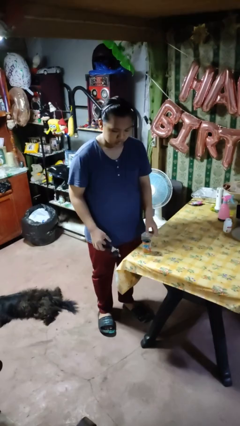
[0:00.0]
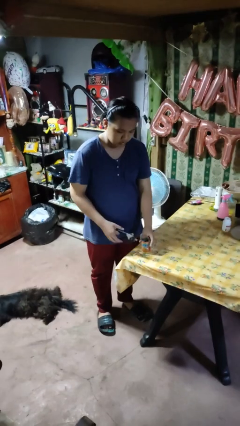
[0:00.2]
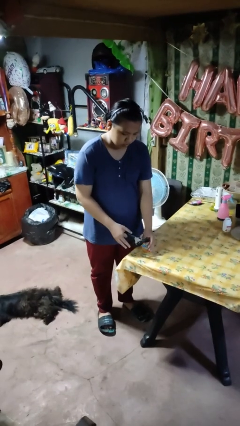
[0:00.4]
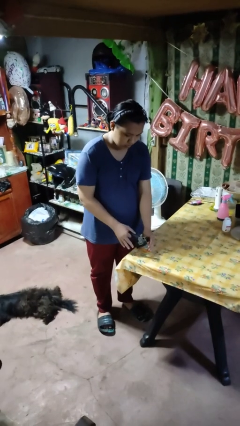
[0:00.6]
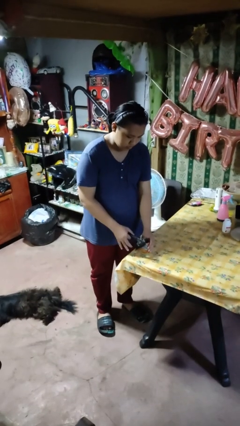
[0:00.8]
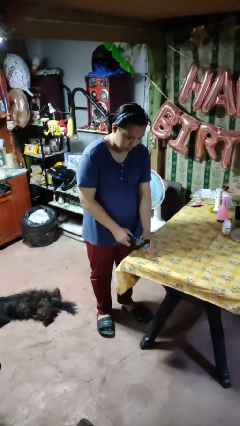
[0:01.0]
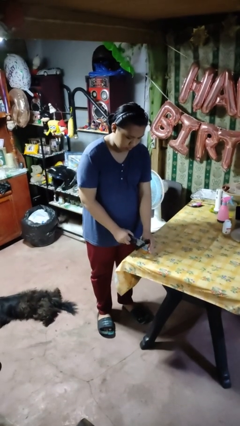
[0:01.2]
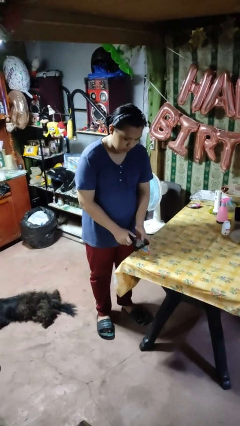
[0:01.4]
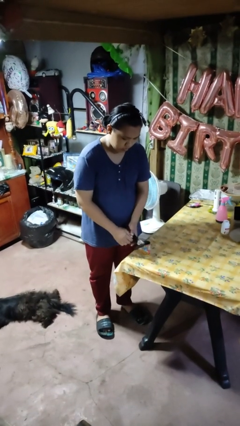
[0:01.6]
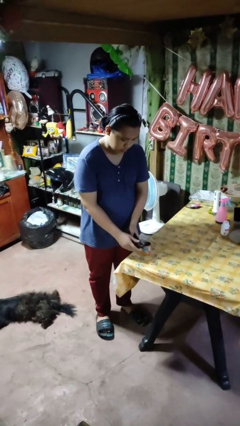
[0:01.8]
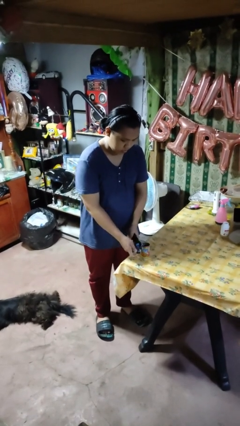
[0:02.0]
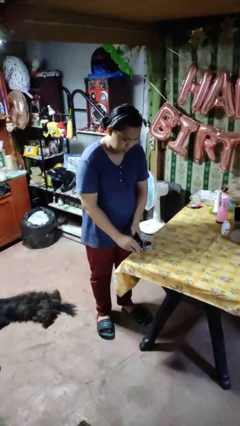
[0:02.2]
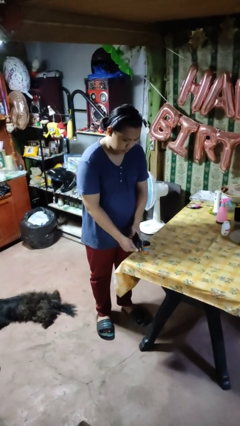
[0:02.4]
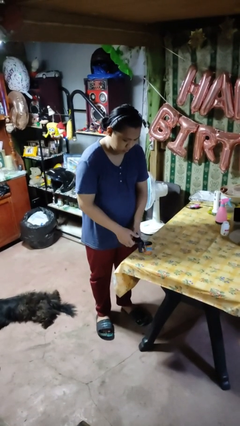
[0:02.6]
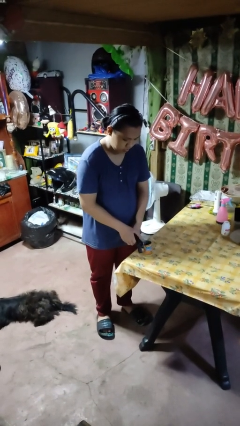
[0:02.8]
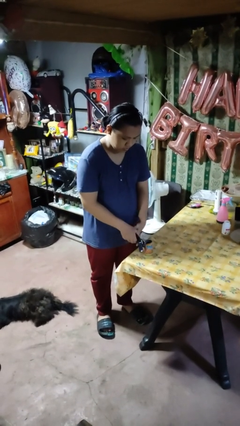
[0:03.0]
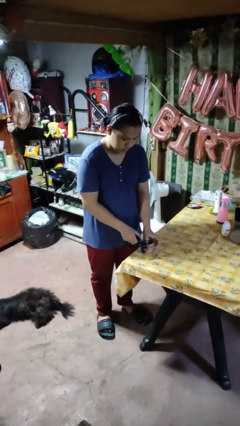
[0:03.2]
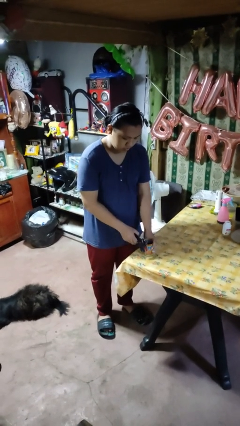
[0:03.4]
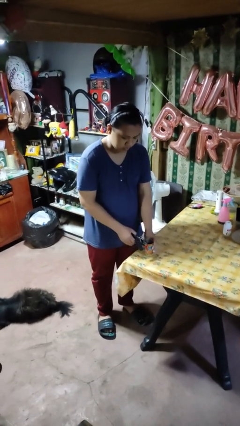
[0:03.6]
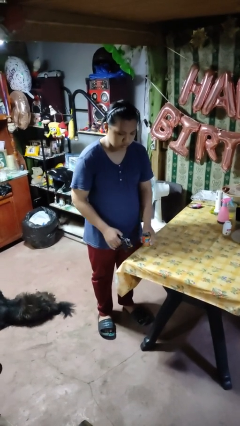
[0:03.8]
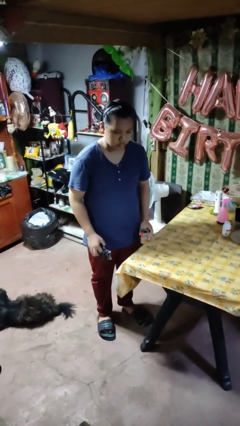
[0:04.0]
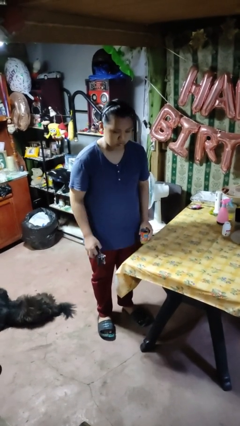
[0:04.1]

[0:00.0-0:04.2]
person opens can with can opener

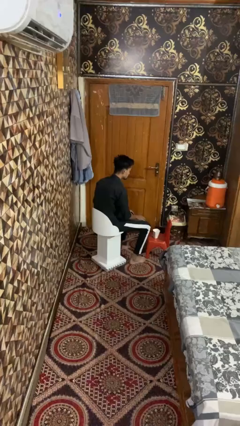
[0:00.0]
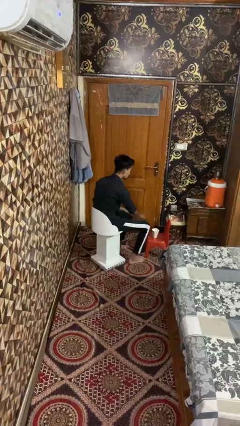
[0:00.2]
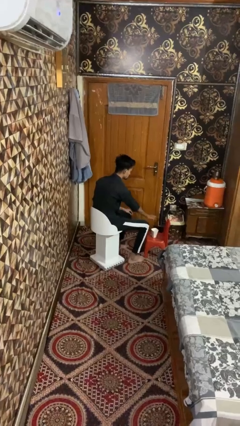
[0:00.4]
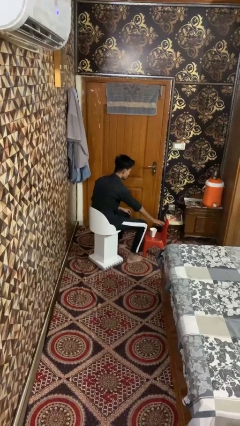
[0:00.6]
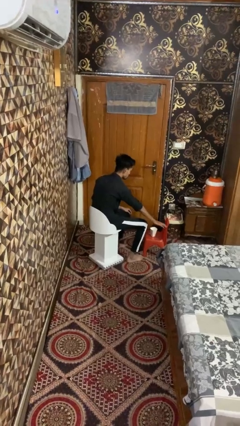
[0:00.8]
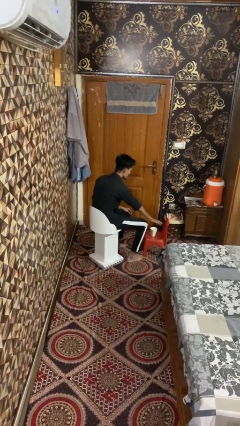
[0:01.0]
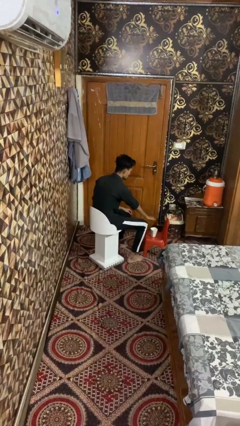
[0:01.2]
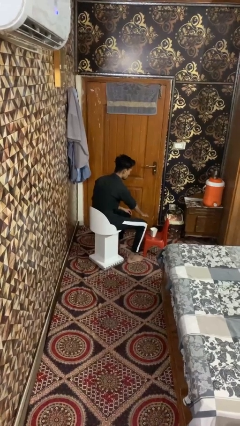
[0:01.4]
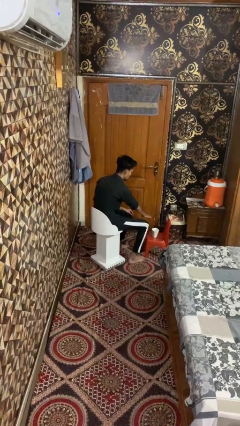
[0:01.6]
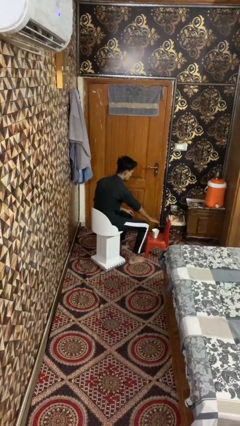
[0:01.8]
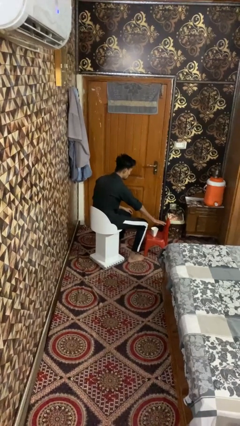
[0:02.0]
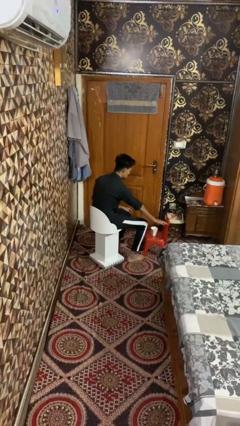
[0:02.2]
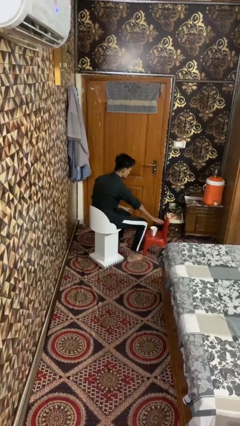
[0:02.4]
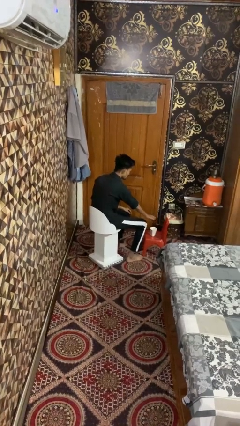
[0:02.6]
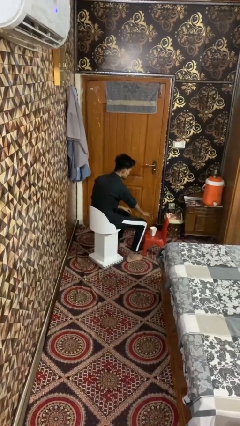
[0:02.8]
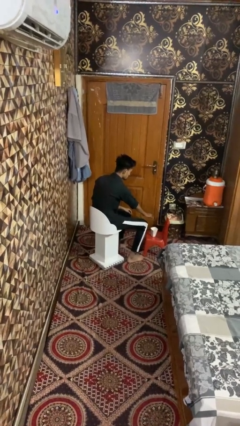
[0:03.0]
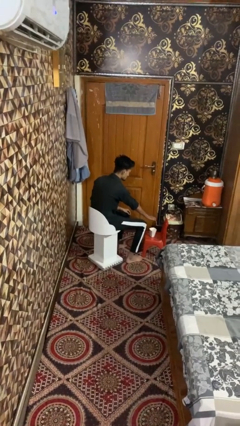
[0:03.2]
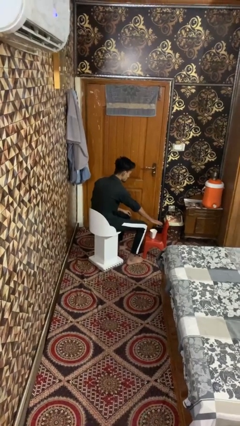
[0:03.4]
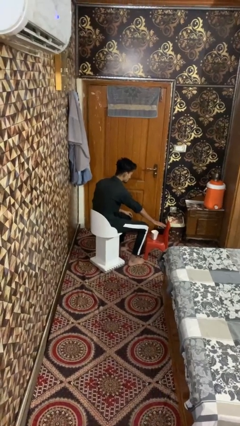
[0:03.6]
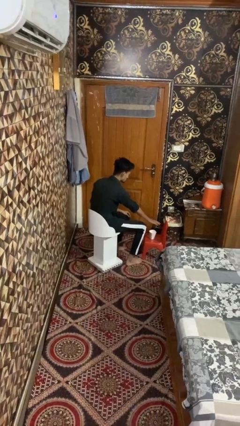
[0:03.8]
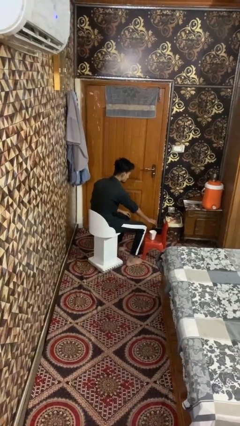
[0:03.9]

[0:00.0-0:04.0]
person waves hand over object

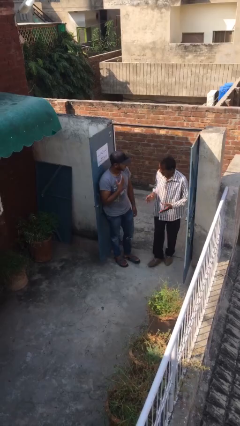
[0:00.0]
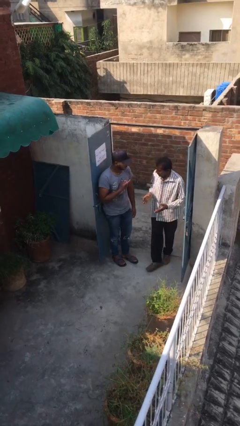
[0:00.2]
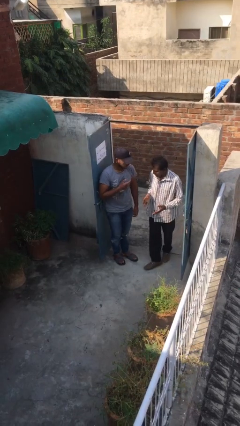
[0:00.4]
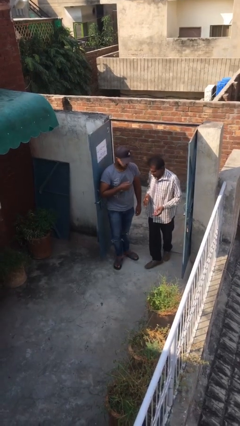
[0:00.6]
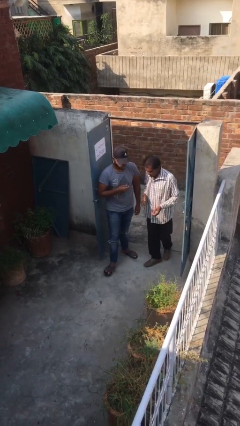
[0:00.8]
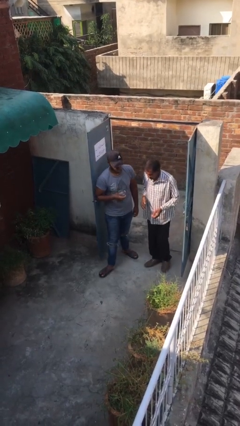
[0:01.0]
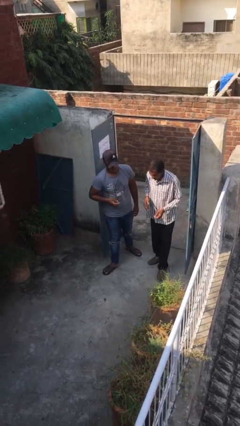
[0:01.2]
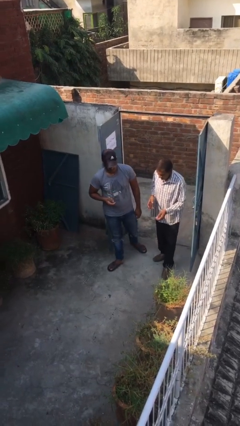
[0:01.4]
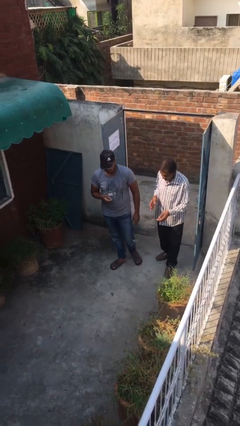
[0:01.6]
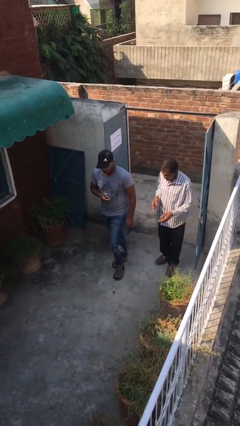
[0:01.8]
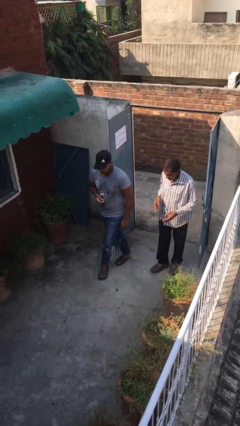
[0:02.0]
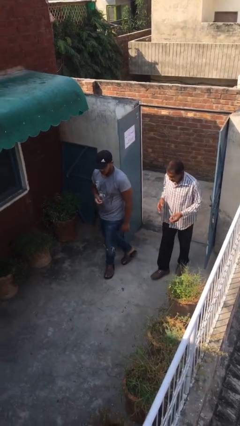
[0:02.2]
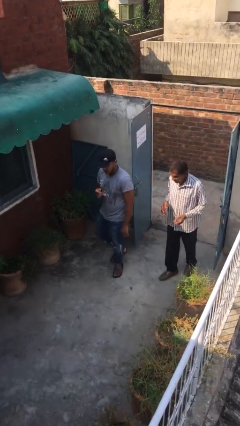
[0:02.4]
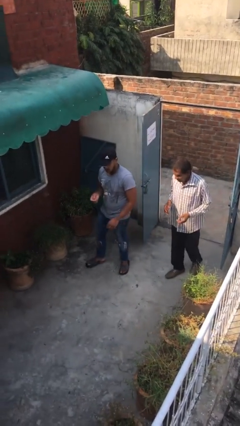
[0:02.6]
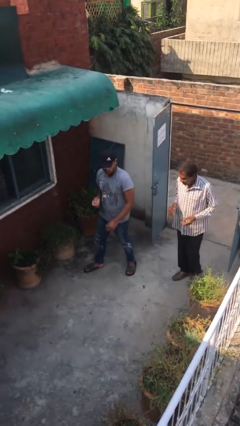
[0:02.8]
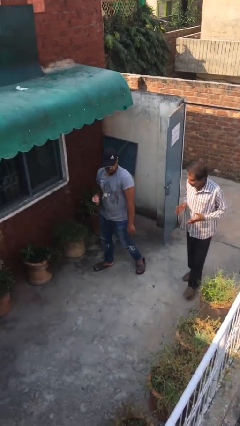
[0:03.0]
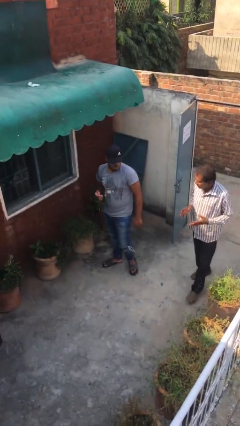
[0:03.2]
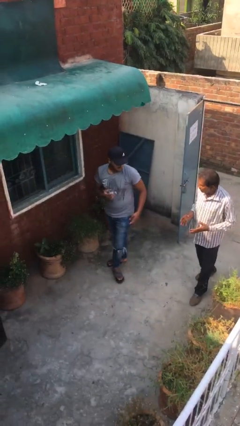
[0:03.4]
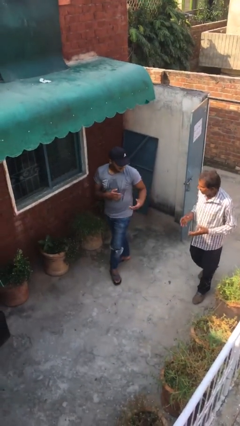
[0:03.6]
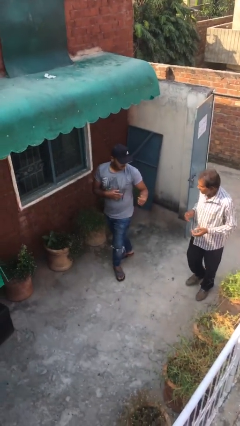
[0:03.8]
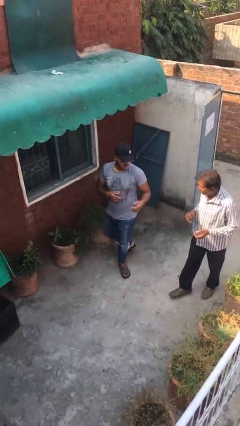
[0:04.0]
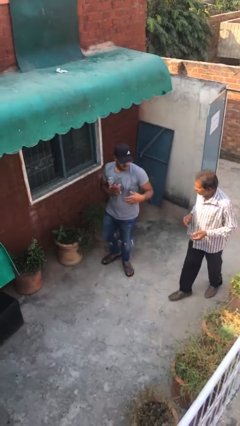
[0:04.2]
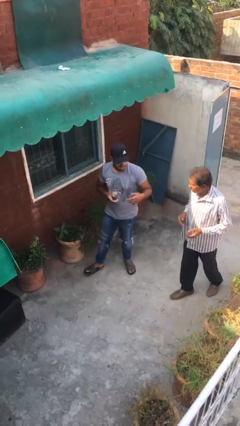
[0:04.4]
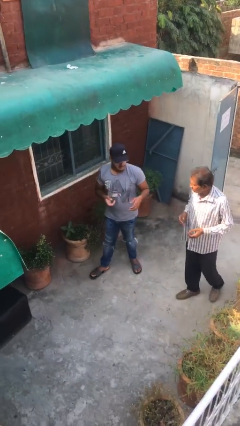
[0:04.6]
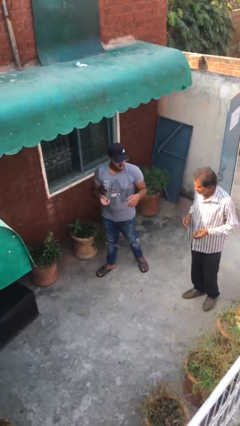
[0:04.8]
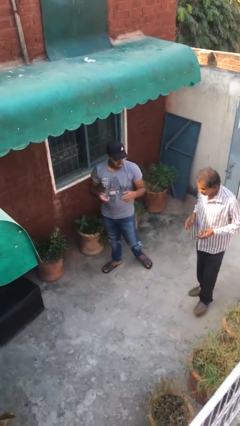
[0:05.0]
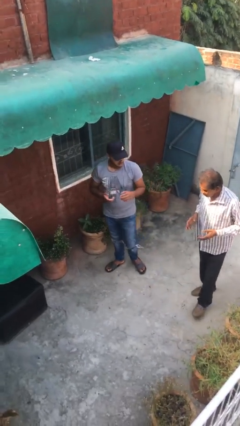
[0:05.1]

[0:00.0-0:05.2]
person talks to person

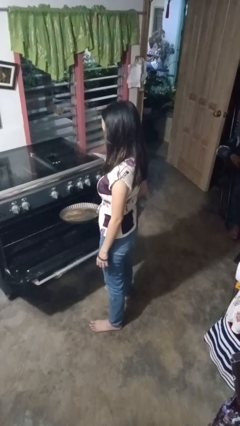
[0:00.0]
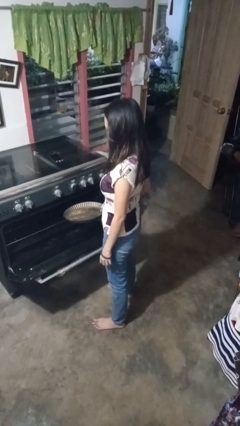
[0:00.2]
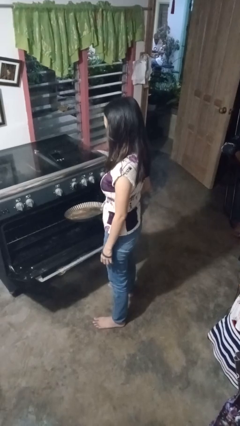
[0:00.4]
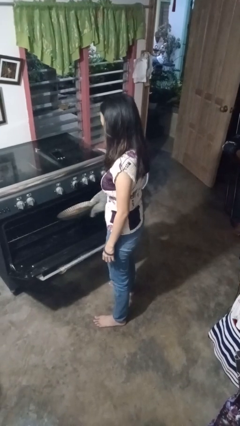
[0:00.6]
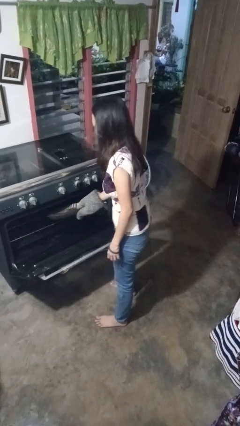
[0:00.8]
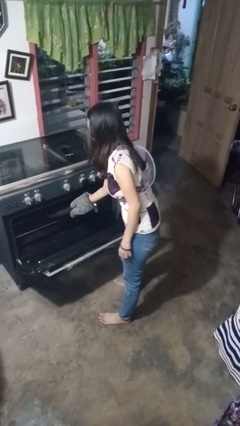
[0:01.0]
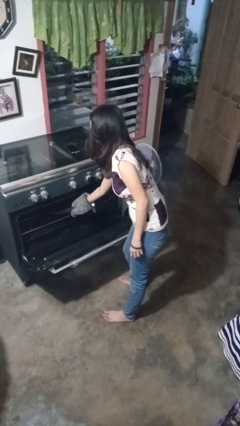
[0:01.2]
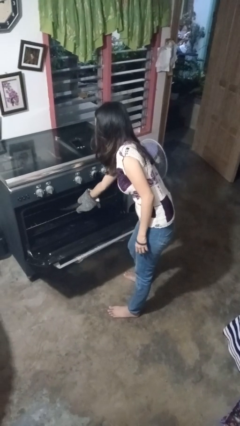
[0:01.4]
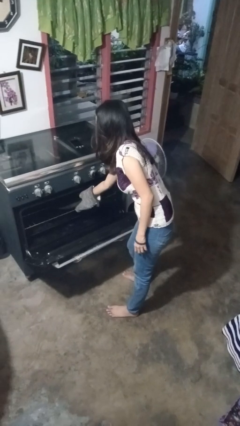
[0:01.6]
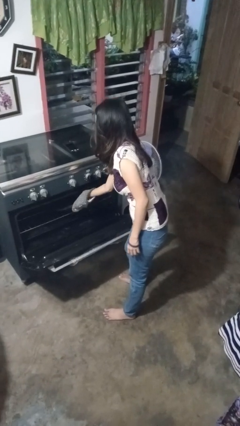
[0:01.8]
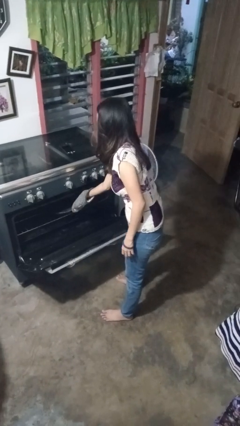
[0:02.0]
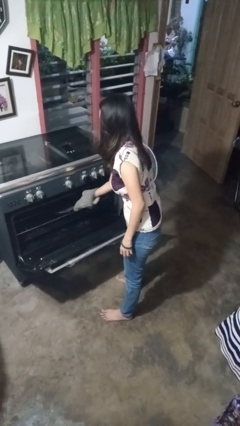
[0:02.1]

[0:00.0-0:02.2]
person puts object into oven

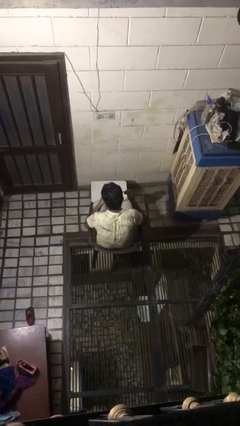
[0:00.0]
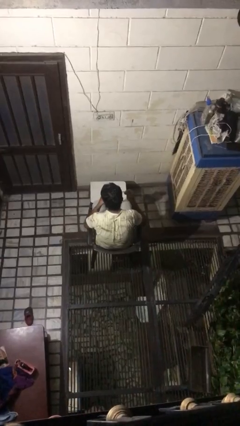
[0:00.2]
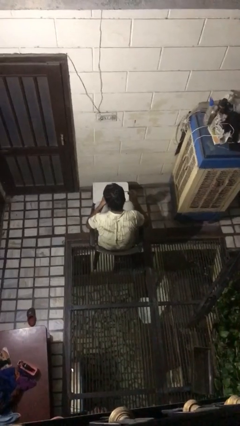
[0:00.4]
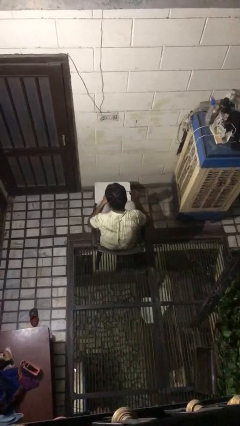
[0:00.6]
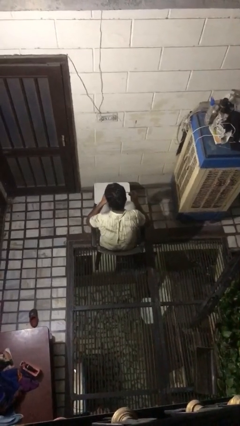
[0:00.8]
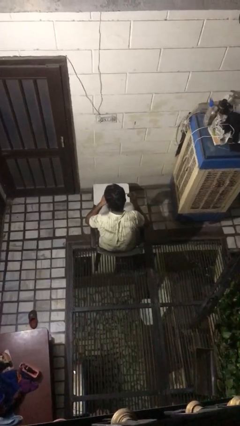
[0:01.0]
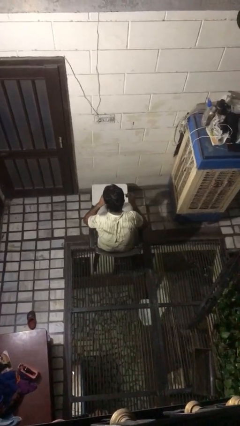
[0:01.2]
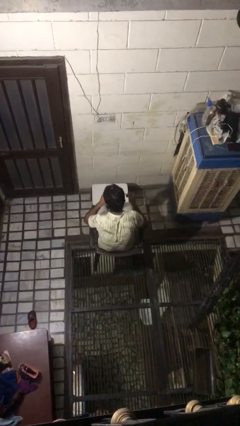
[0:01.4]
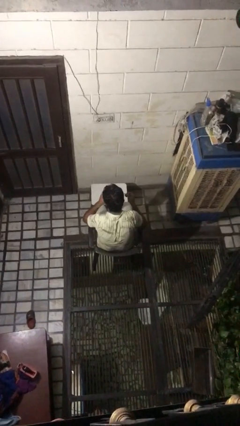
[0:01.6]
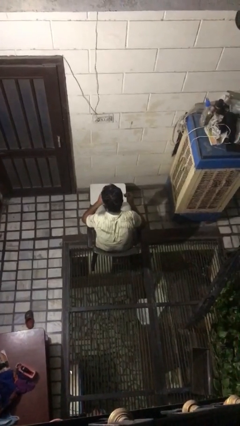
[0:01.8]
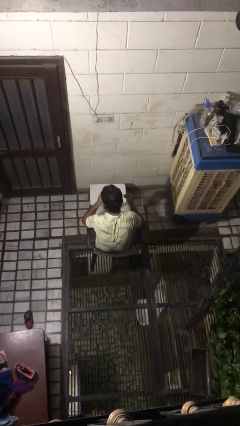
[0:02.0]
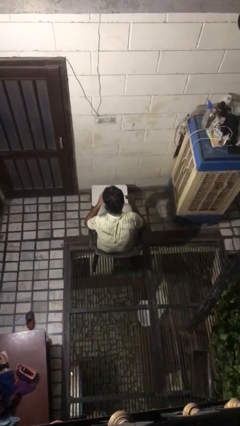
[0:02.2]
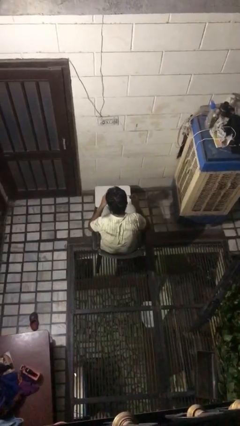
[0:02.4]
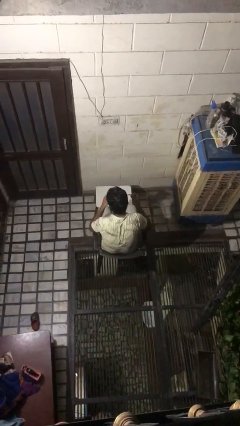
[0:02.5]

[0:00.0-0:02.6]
person drinks from mug
